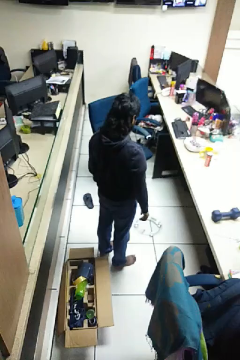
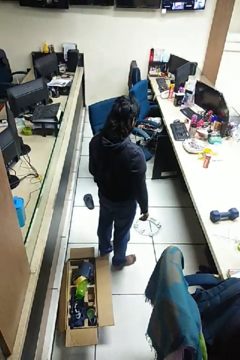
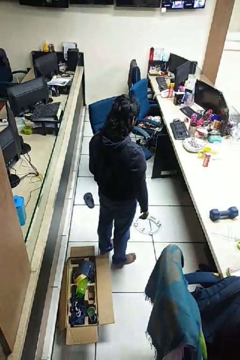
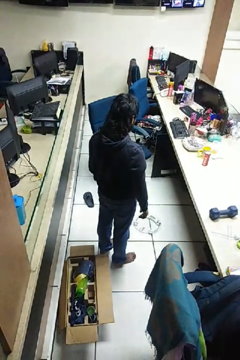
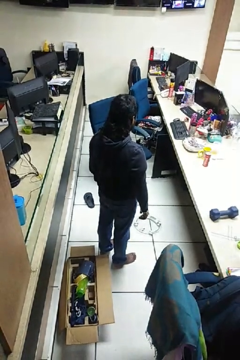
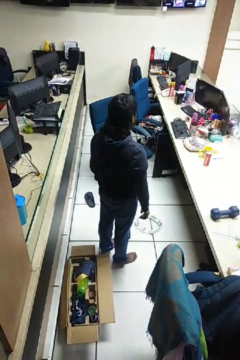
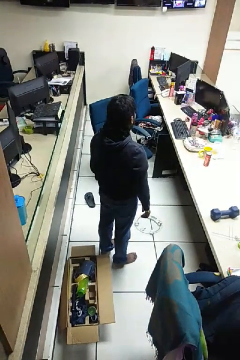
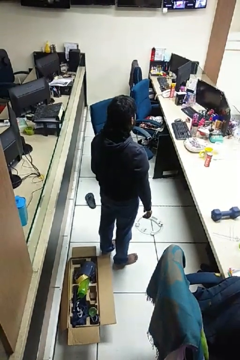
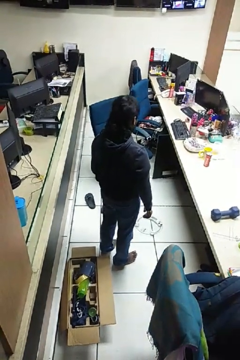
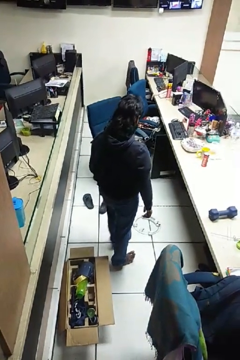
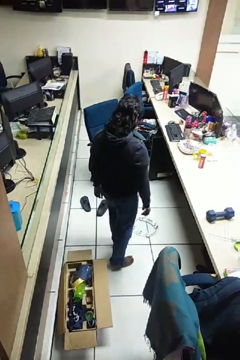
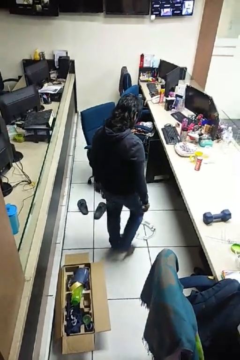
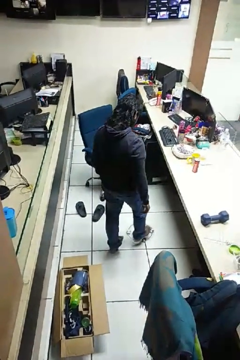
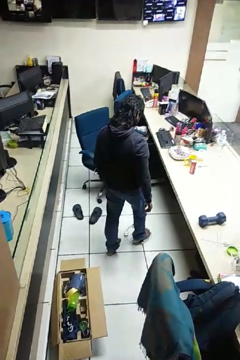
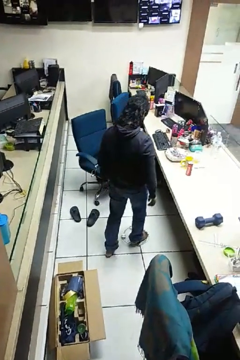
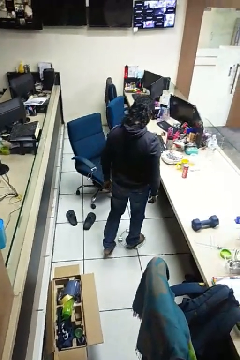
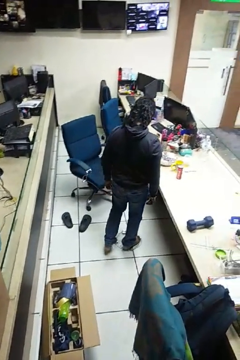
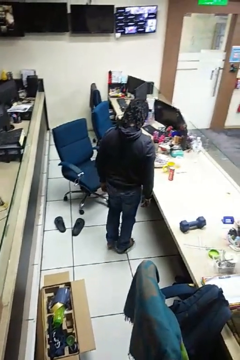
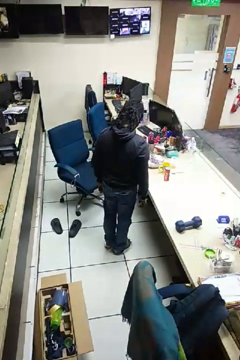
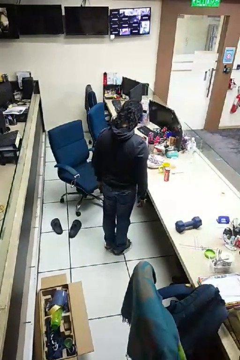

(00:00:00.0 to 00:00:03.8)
person uses bodyweight scale

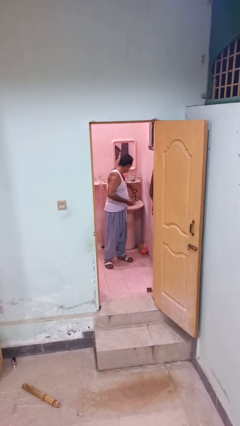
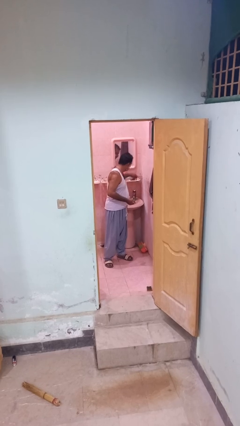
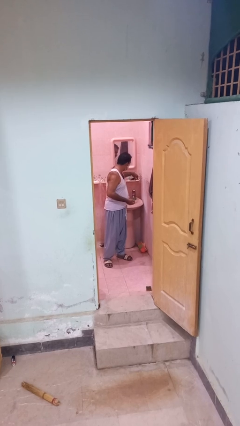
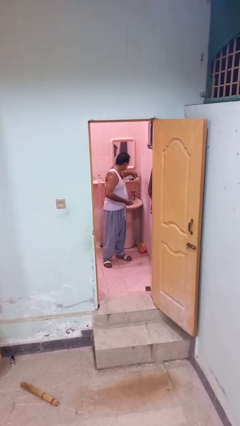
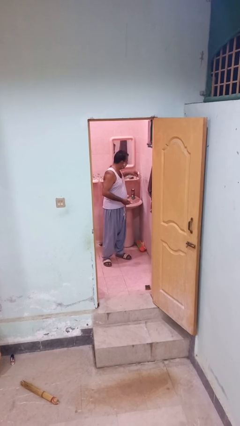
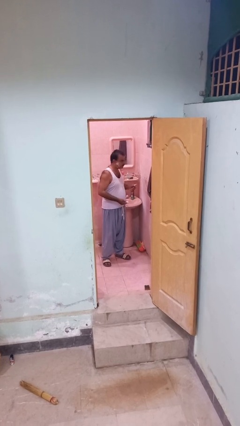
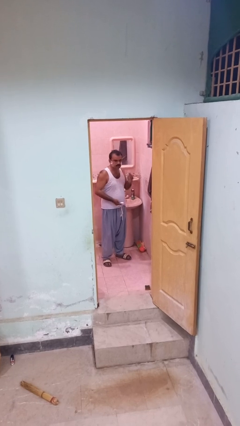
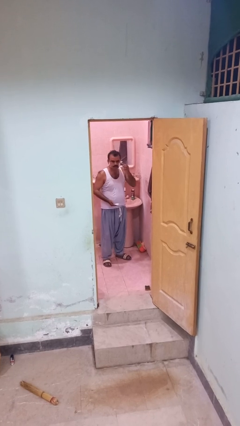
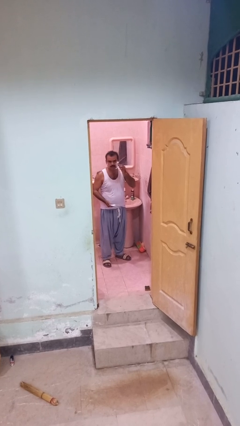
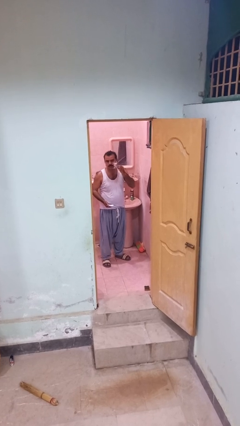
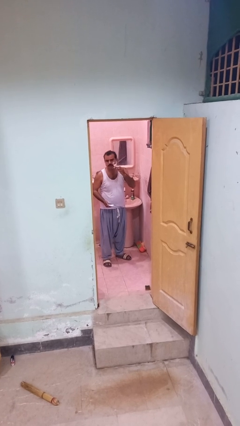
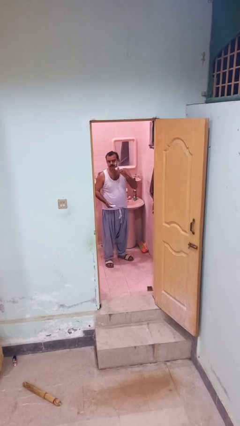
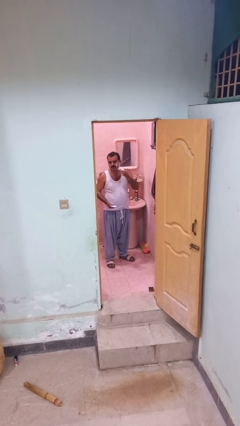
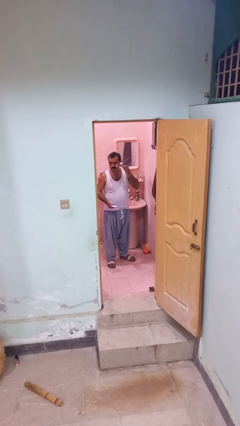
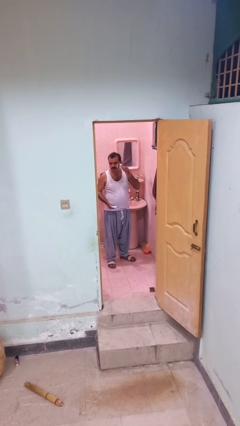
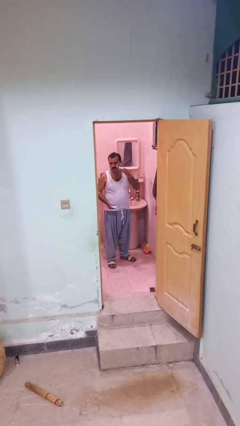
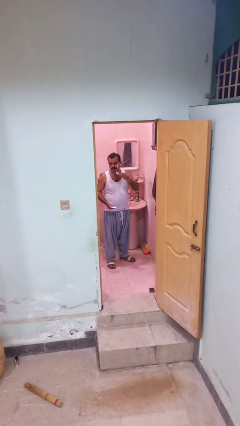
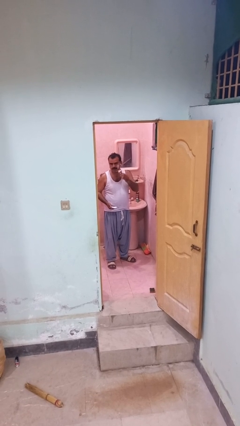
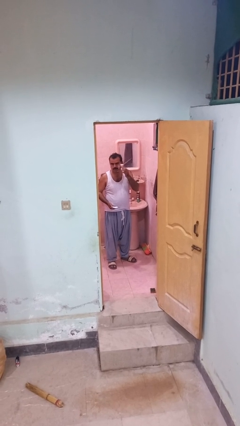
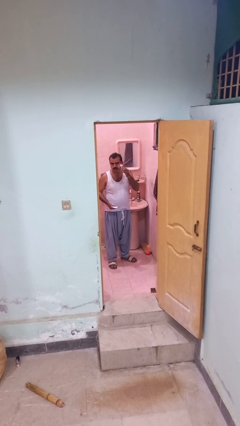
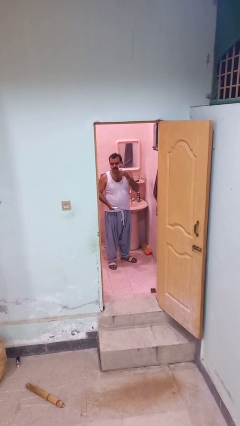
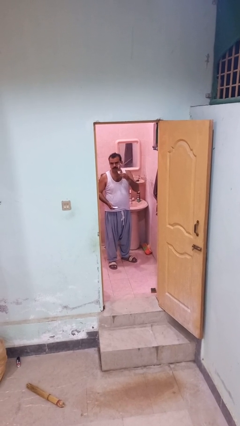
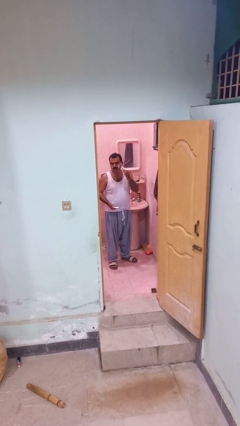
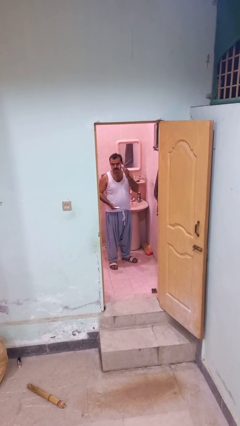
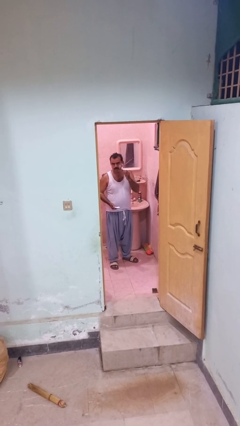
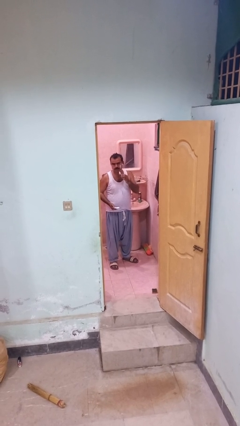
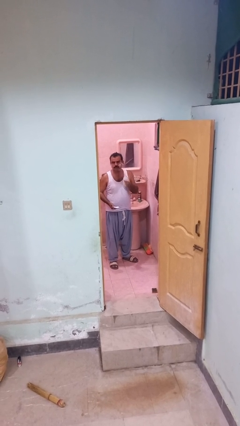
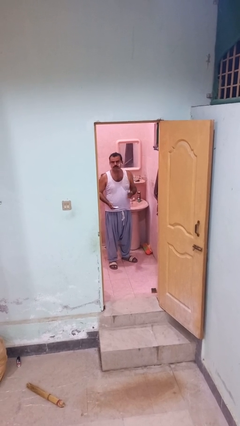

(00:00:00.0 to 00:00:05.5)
person shaves face

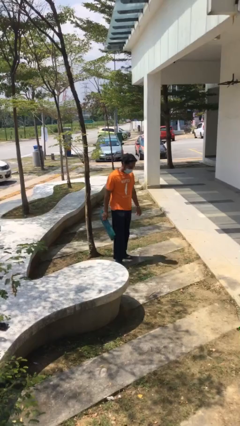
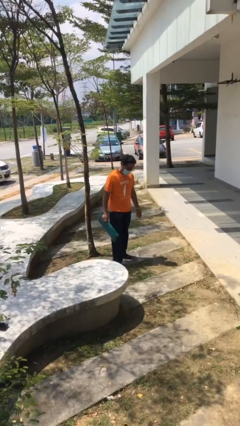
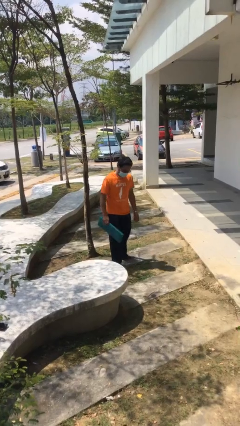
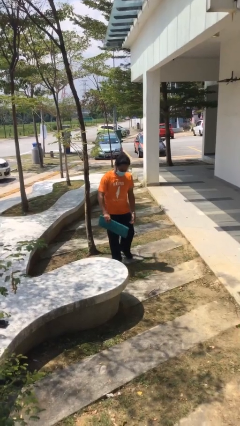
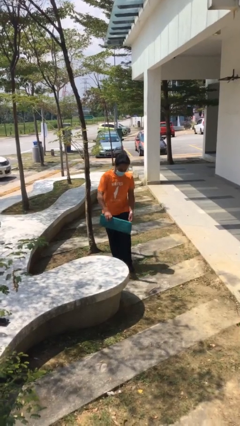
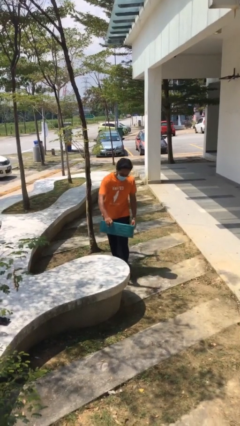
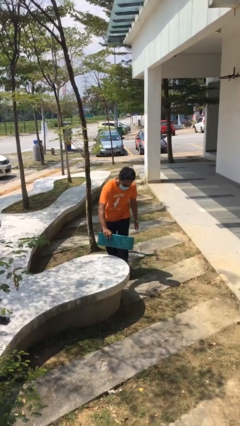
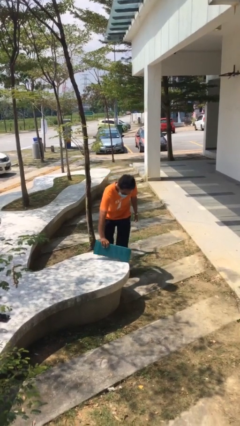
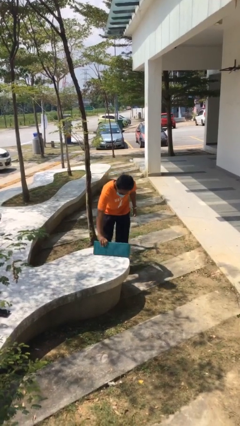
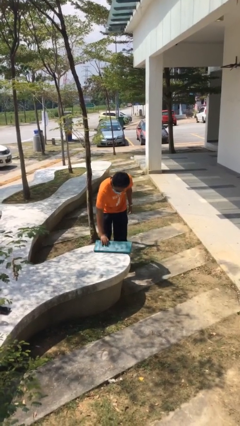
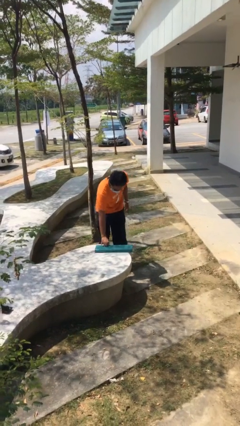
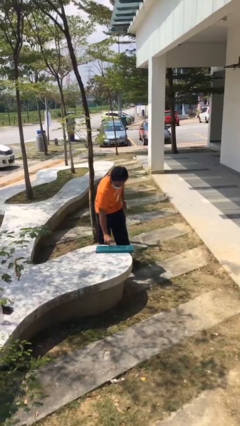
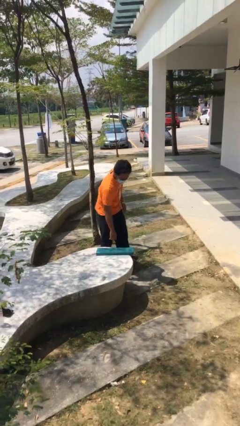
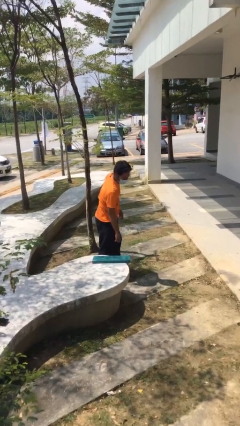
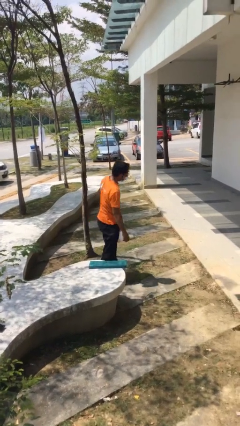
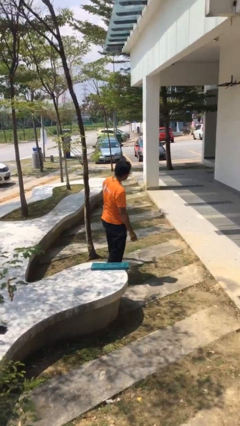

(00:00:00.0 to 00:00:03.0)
person puts down object on table

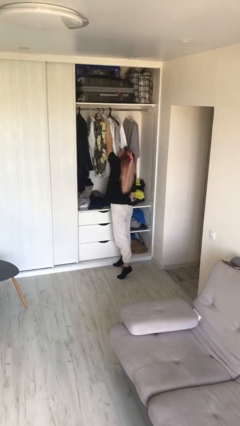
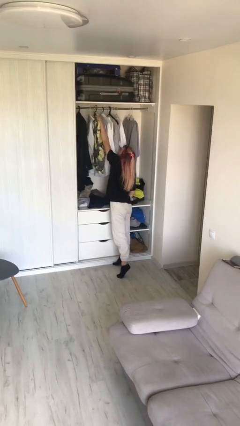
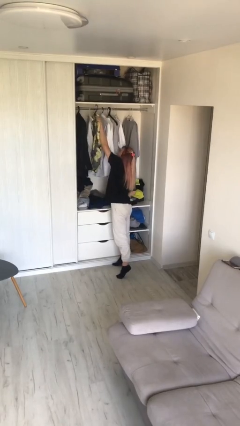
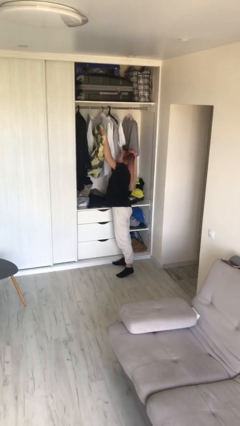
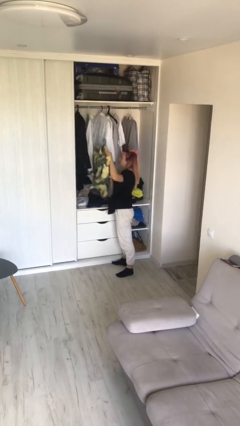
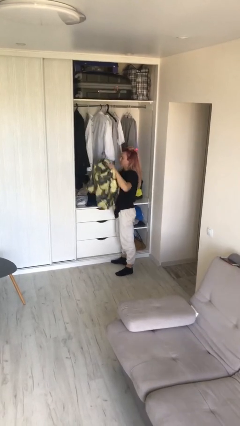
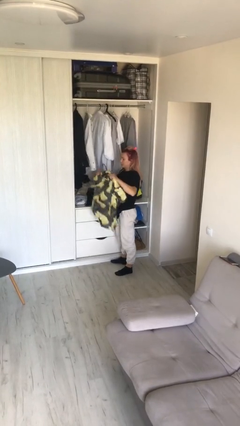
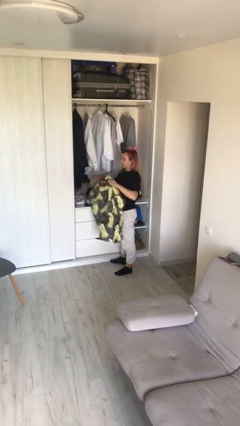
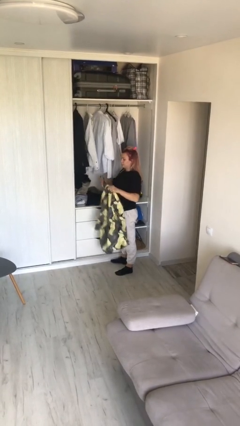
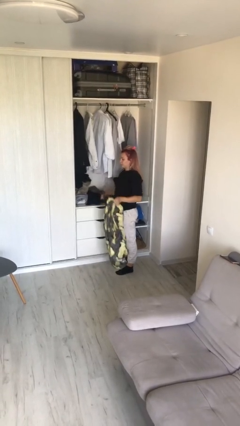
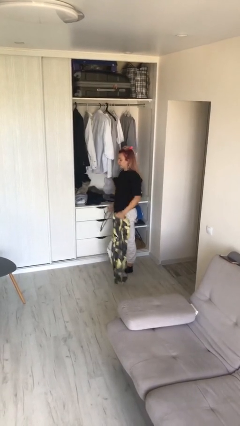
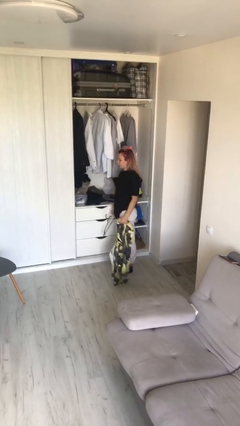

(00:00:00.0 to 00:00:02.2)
person takes clothes from closet

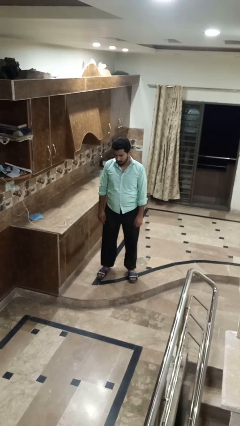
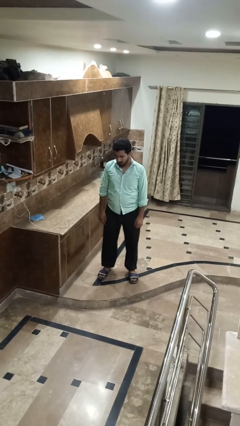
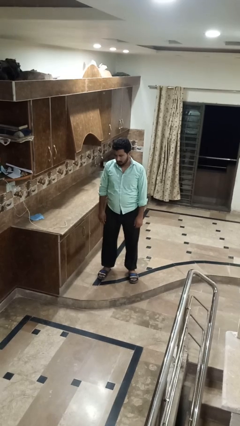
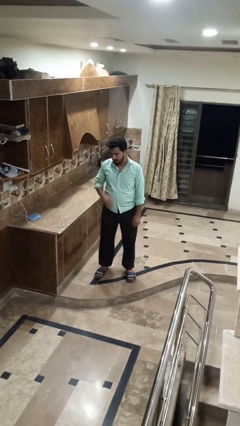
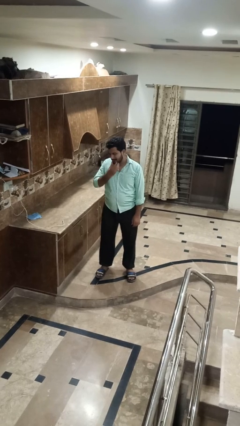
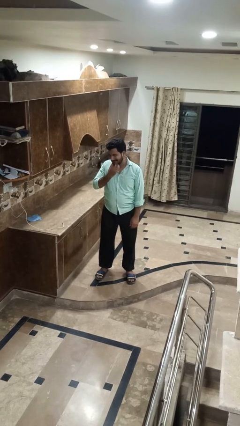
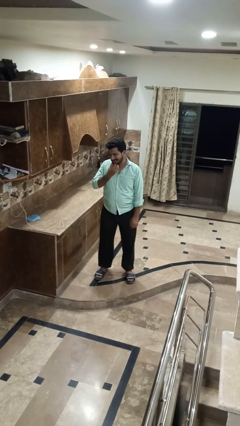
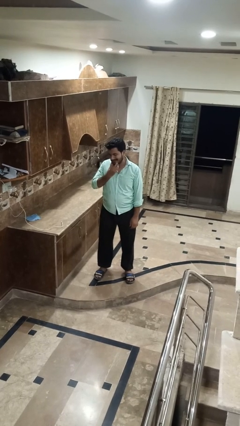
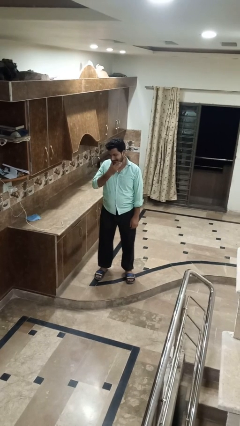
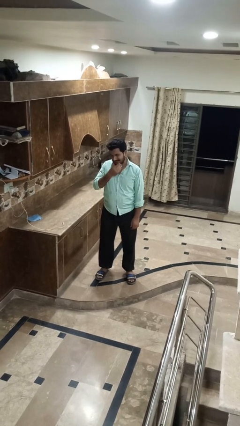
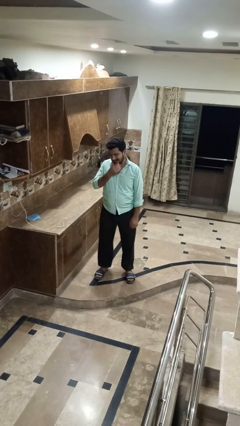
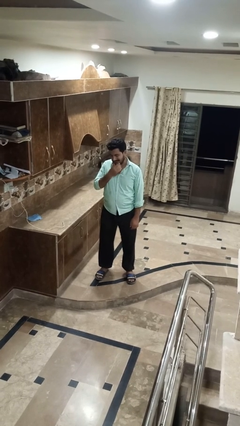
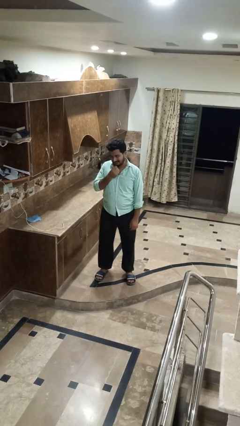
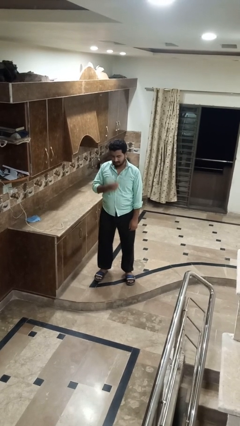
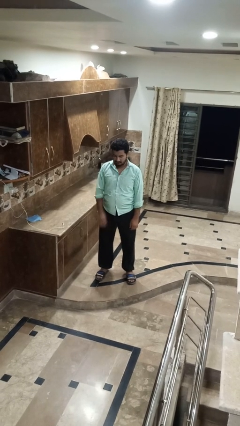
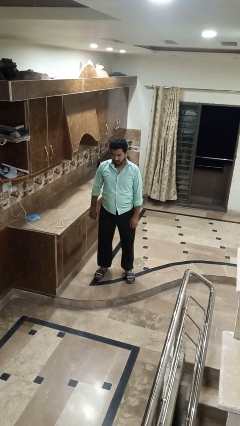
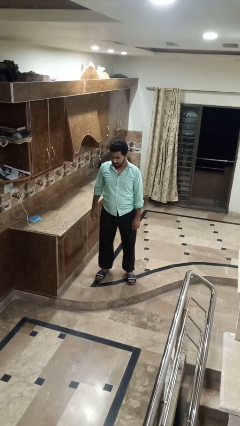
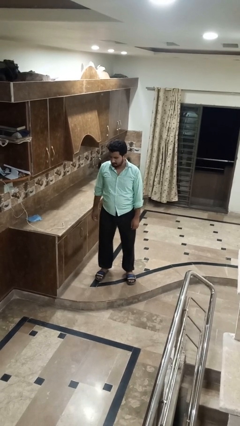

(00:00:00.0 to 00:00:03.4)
person strokes chin

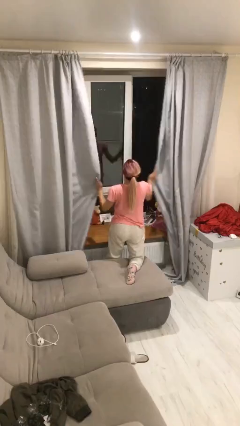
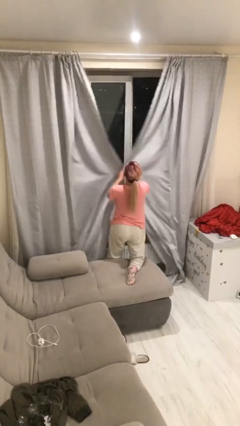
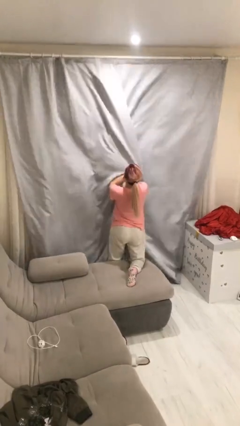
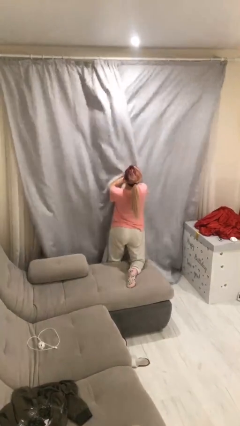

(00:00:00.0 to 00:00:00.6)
person closes curtains
